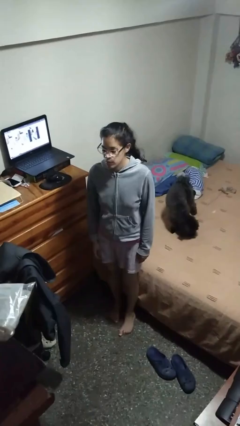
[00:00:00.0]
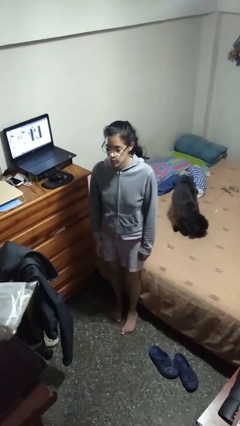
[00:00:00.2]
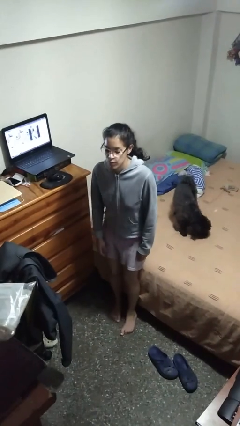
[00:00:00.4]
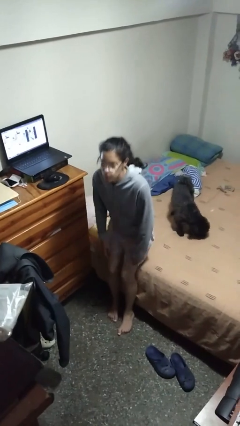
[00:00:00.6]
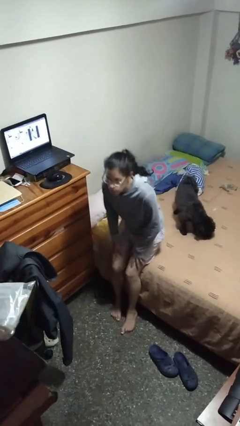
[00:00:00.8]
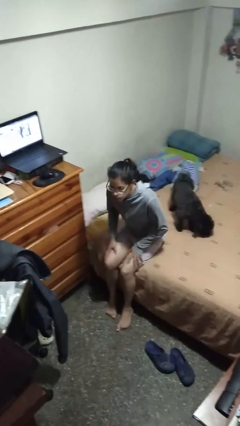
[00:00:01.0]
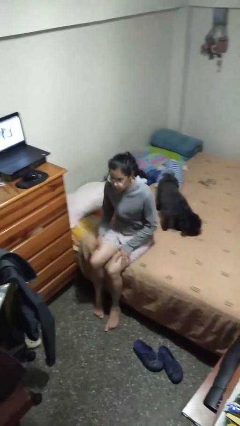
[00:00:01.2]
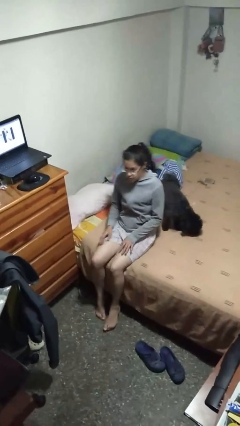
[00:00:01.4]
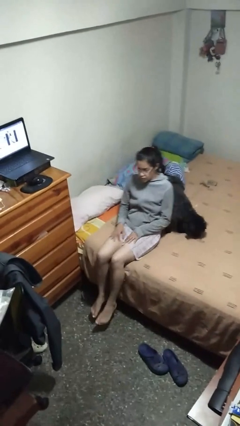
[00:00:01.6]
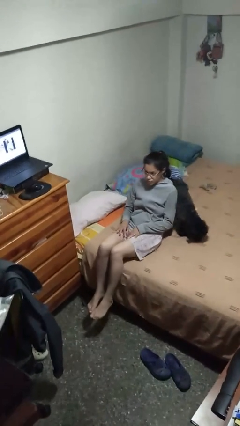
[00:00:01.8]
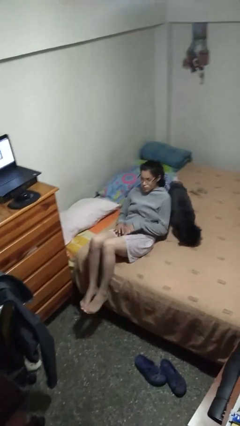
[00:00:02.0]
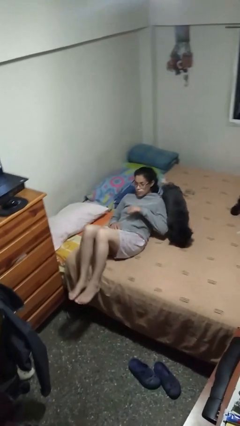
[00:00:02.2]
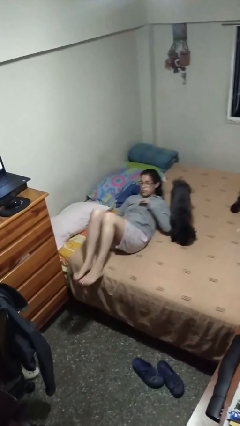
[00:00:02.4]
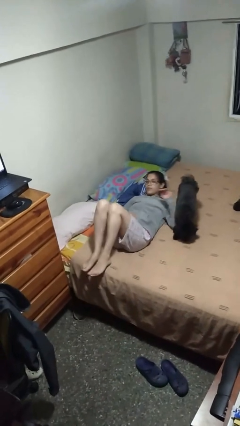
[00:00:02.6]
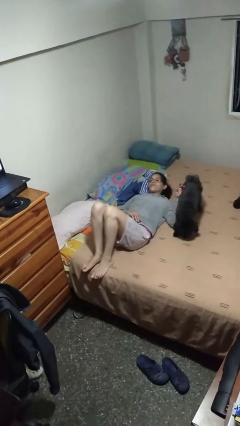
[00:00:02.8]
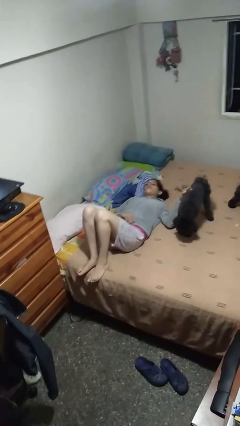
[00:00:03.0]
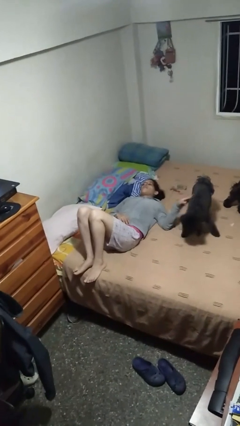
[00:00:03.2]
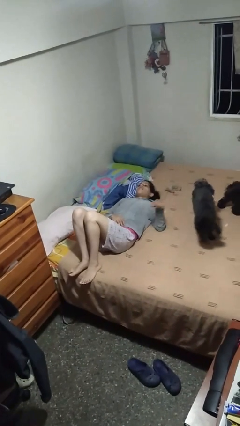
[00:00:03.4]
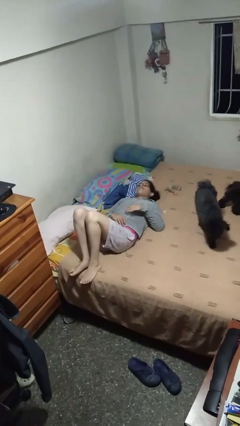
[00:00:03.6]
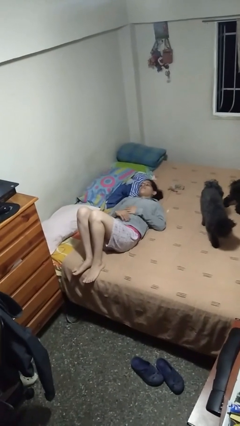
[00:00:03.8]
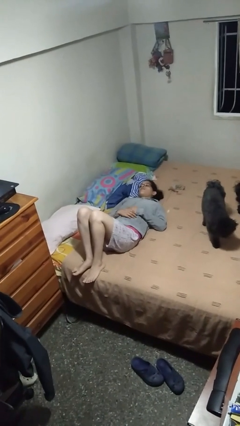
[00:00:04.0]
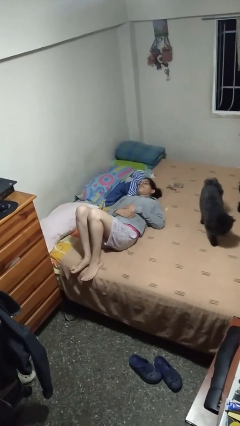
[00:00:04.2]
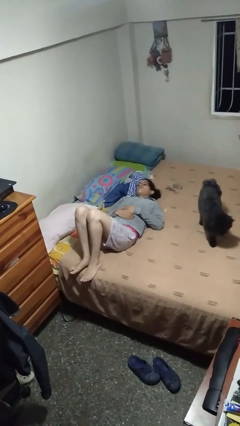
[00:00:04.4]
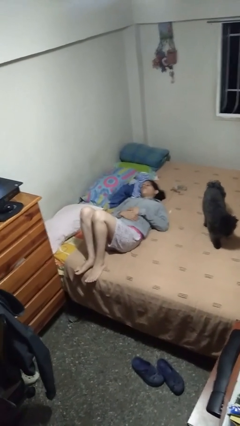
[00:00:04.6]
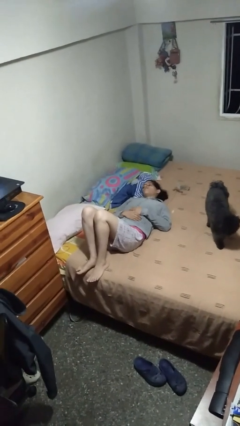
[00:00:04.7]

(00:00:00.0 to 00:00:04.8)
person lies down on bed

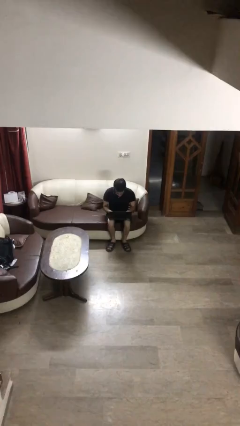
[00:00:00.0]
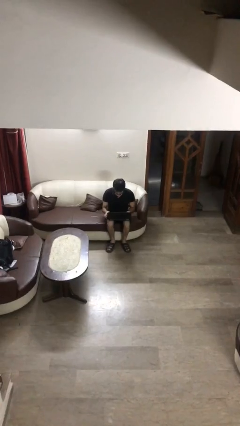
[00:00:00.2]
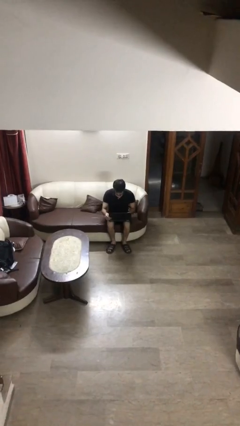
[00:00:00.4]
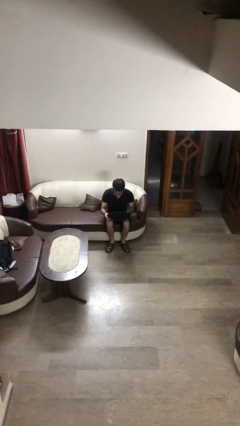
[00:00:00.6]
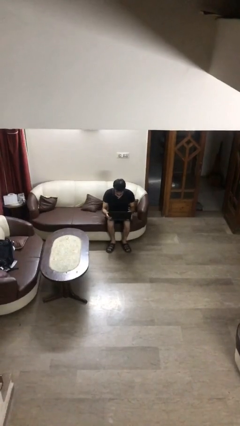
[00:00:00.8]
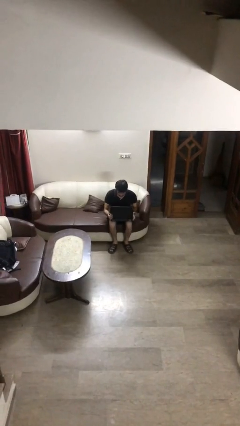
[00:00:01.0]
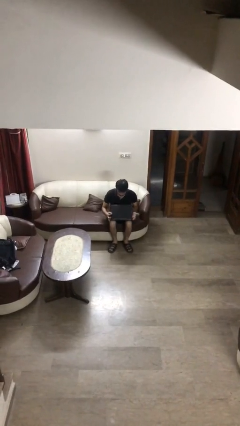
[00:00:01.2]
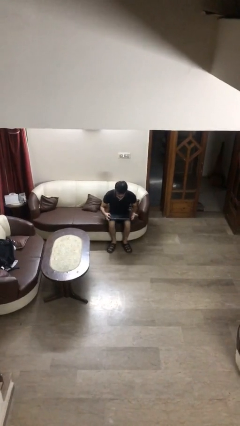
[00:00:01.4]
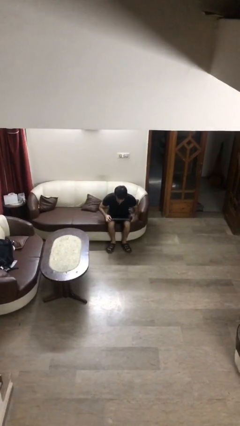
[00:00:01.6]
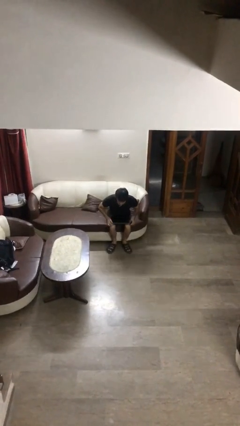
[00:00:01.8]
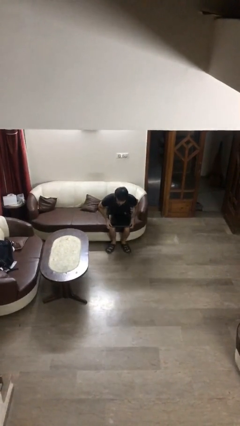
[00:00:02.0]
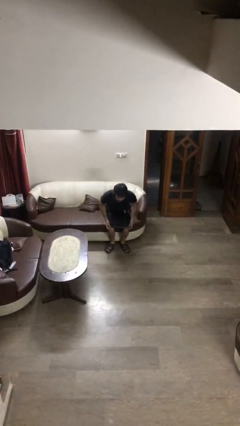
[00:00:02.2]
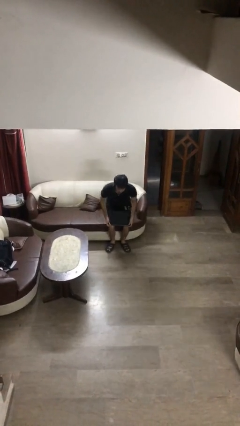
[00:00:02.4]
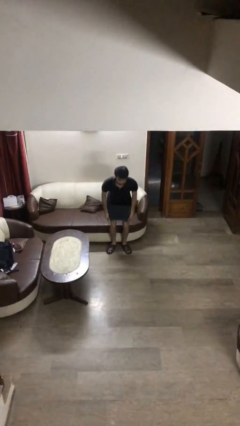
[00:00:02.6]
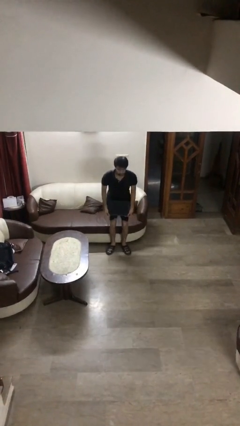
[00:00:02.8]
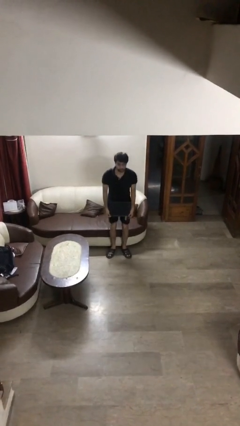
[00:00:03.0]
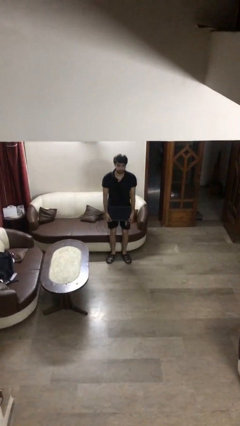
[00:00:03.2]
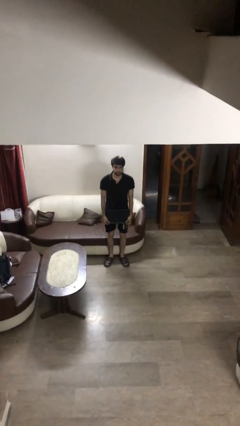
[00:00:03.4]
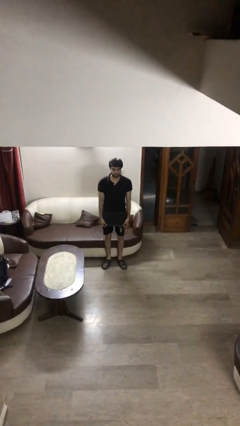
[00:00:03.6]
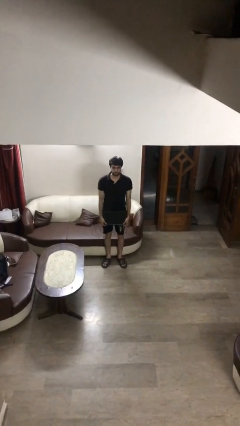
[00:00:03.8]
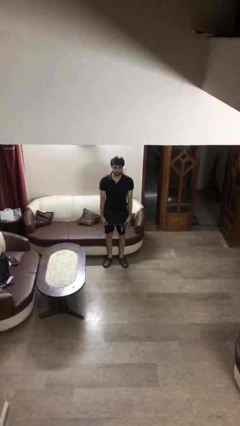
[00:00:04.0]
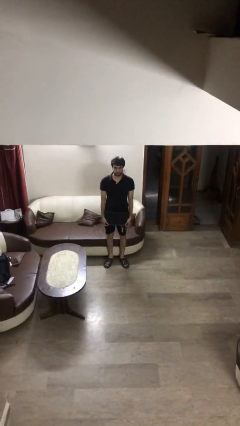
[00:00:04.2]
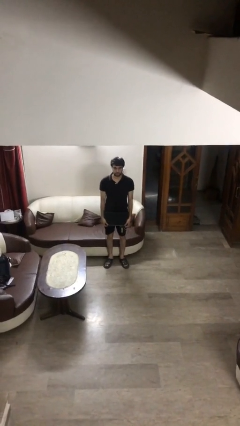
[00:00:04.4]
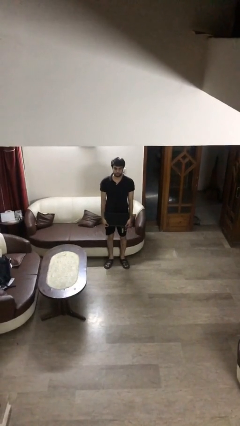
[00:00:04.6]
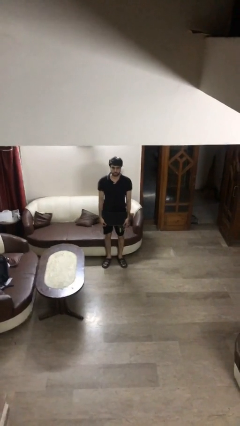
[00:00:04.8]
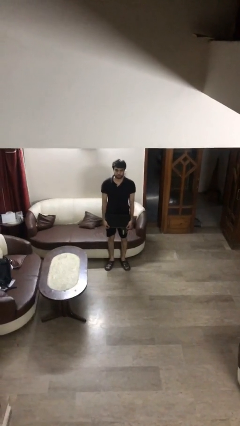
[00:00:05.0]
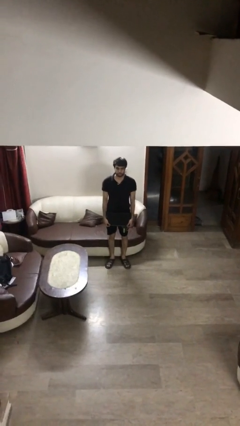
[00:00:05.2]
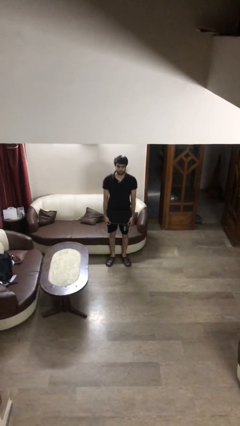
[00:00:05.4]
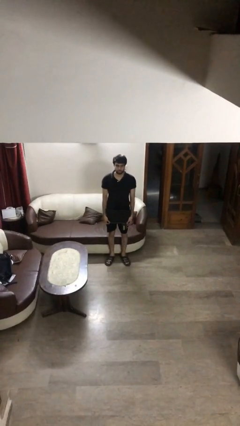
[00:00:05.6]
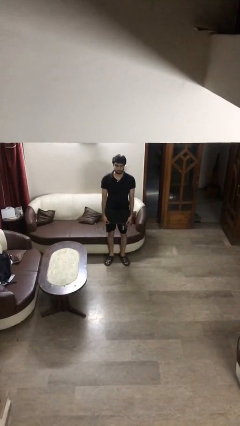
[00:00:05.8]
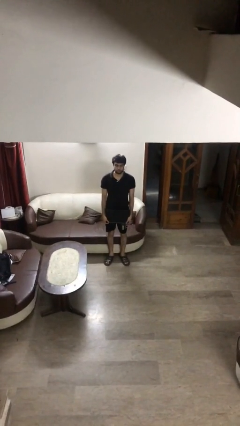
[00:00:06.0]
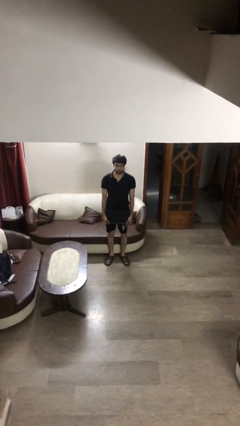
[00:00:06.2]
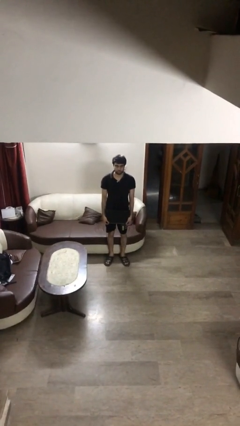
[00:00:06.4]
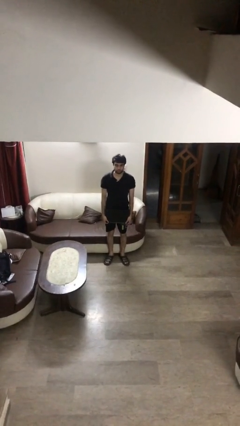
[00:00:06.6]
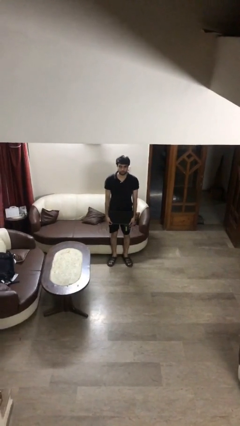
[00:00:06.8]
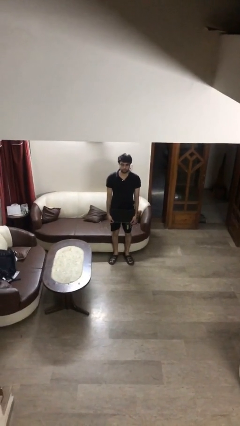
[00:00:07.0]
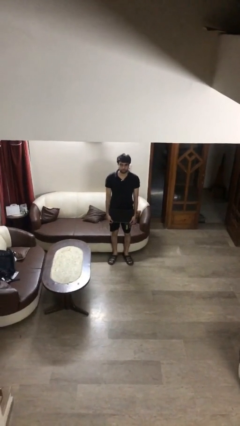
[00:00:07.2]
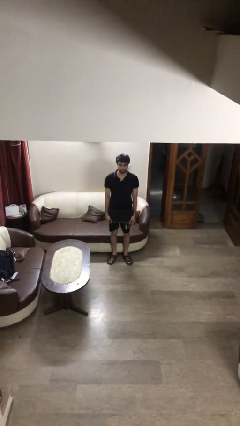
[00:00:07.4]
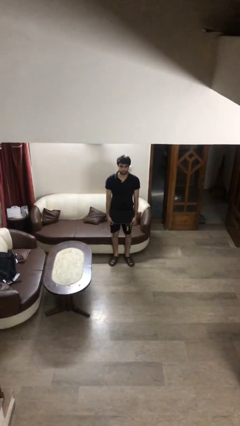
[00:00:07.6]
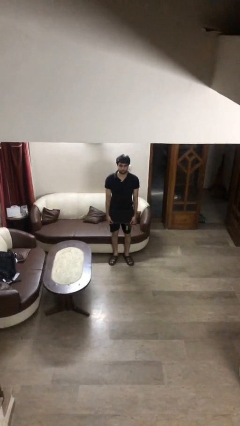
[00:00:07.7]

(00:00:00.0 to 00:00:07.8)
person stands up

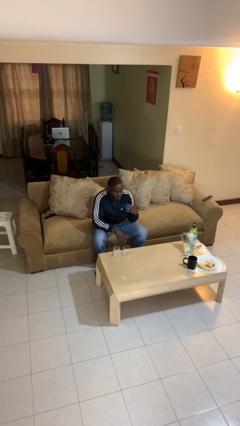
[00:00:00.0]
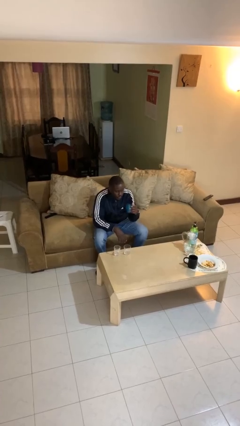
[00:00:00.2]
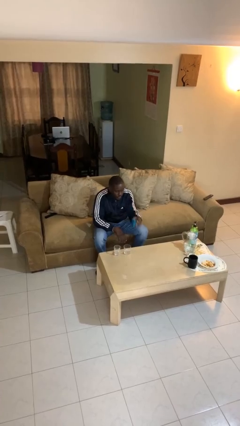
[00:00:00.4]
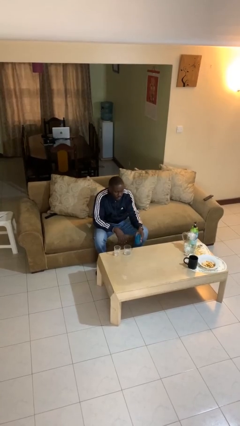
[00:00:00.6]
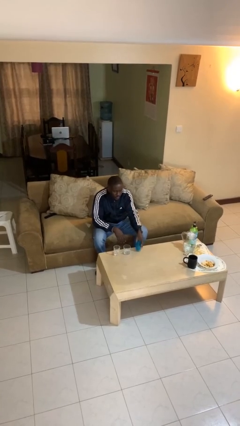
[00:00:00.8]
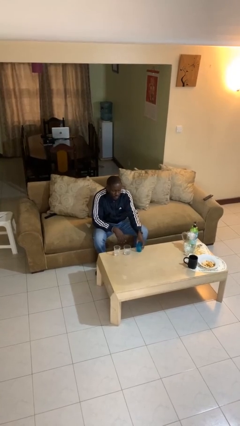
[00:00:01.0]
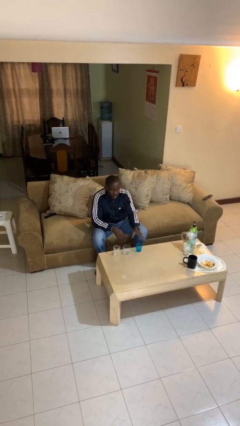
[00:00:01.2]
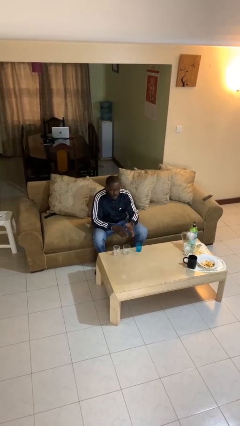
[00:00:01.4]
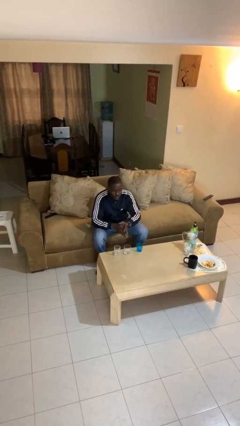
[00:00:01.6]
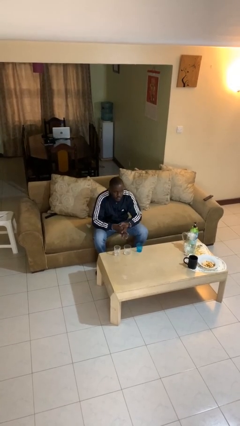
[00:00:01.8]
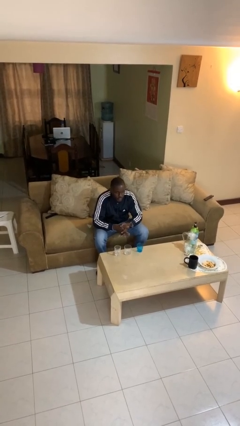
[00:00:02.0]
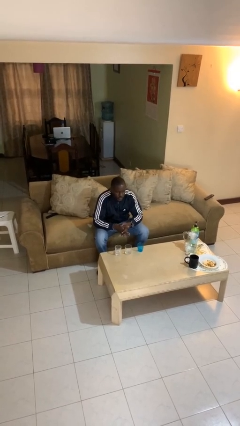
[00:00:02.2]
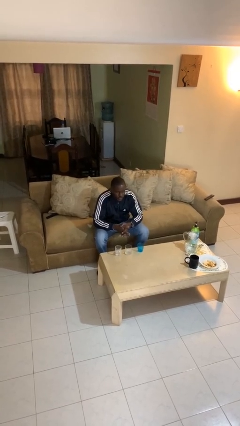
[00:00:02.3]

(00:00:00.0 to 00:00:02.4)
person puts down object on table

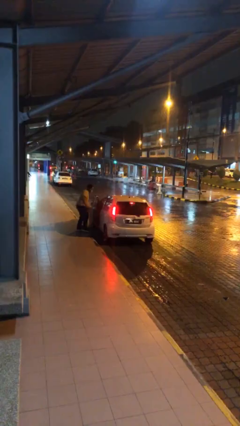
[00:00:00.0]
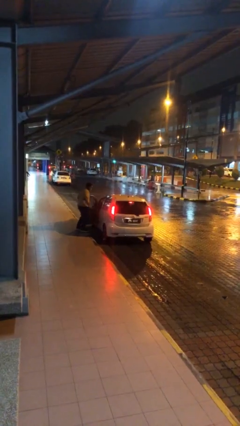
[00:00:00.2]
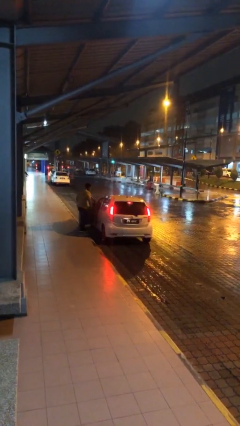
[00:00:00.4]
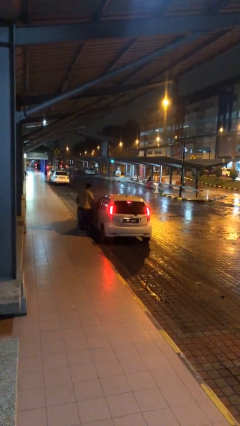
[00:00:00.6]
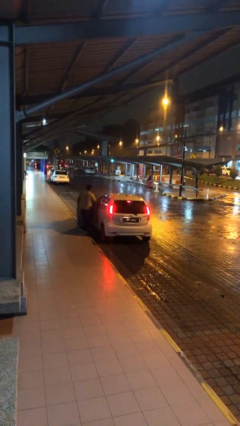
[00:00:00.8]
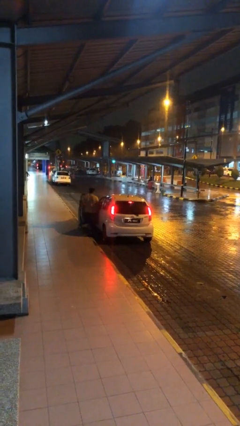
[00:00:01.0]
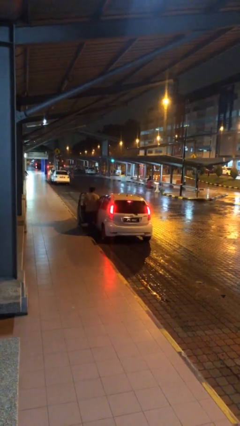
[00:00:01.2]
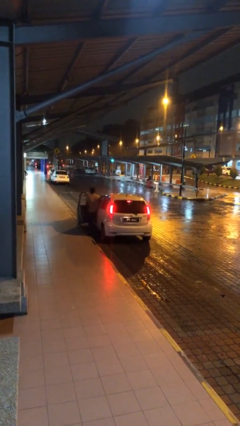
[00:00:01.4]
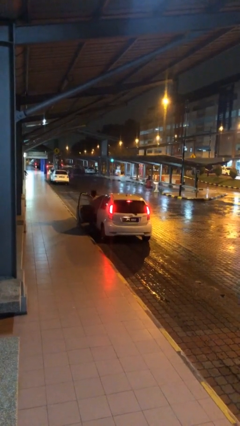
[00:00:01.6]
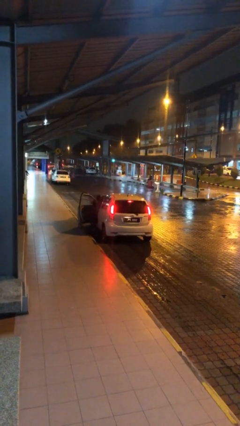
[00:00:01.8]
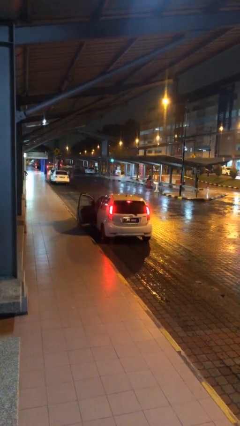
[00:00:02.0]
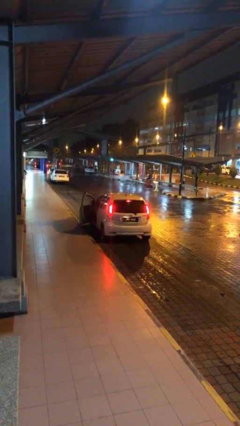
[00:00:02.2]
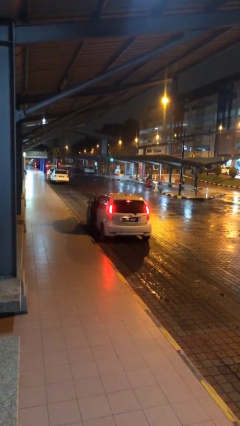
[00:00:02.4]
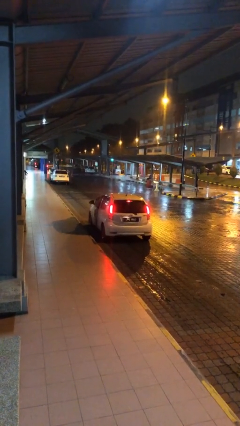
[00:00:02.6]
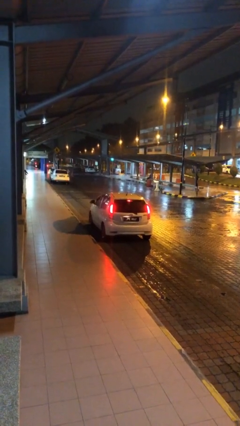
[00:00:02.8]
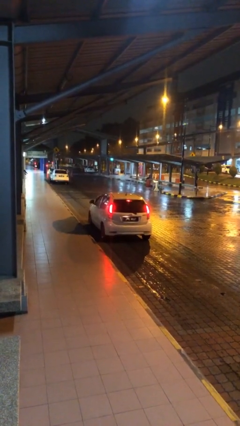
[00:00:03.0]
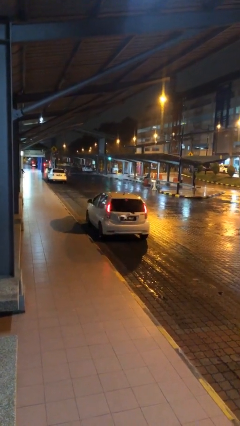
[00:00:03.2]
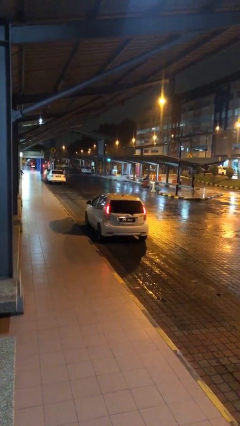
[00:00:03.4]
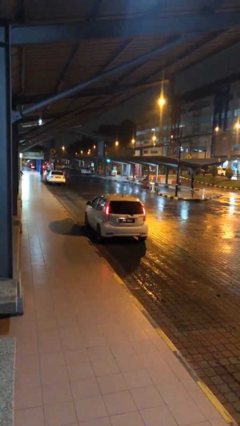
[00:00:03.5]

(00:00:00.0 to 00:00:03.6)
car picks up person
